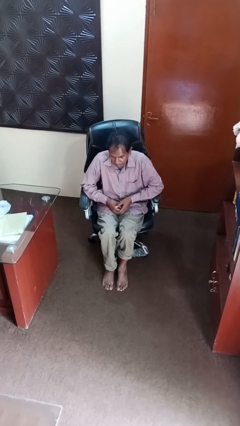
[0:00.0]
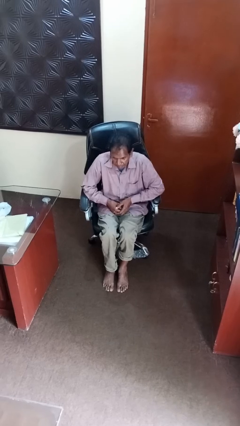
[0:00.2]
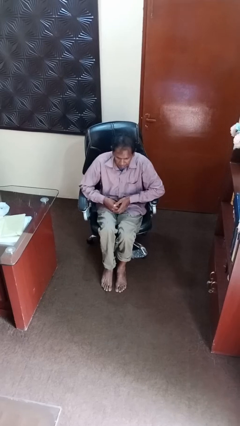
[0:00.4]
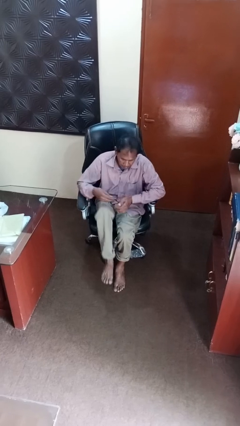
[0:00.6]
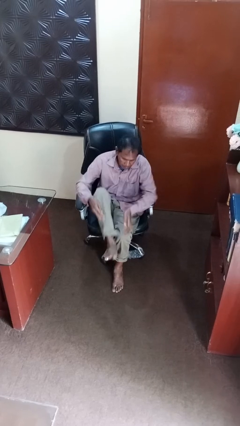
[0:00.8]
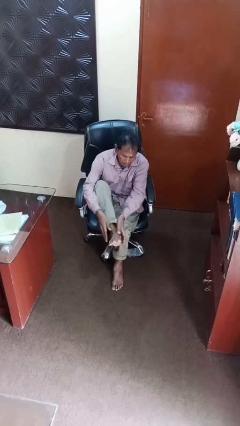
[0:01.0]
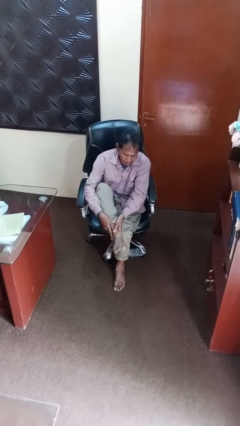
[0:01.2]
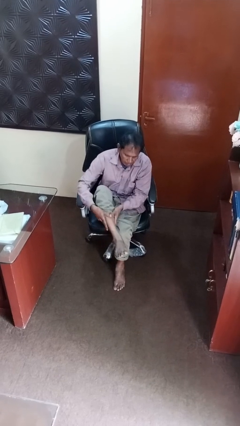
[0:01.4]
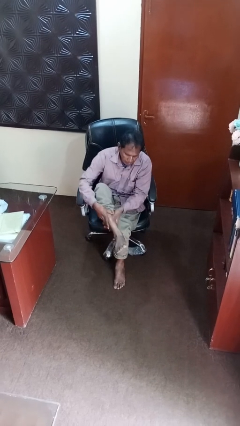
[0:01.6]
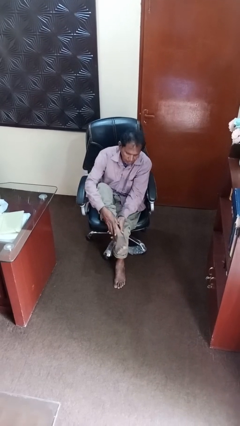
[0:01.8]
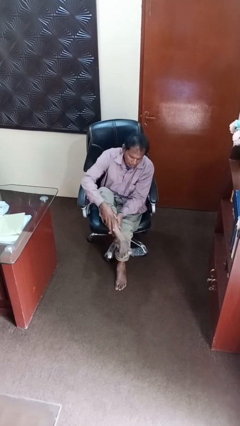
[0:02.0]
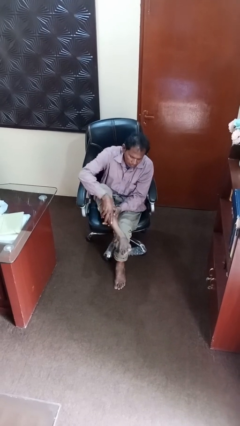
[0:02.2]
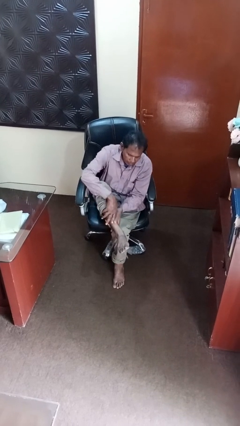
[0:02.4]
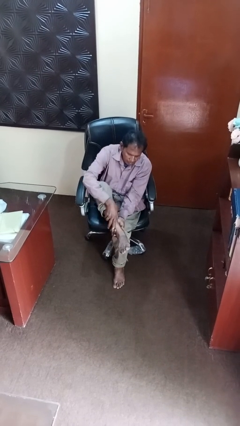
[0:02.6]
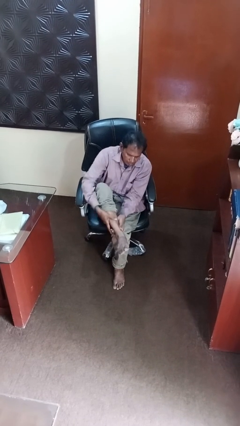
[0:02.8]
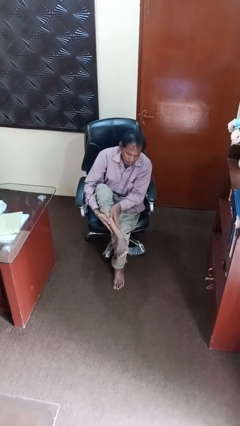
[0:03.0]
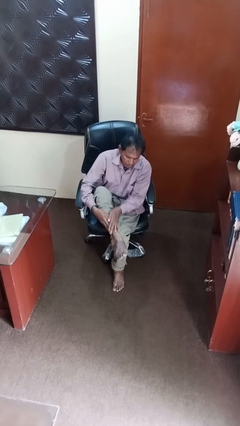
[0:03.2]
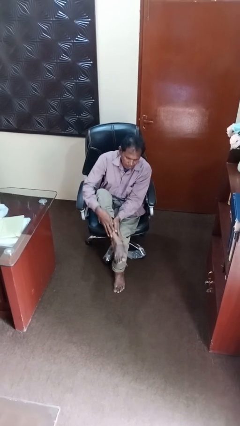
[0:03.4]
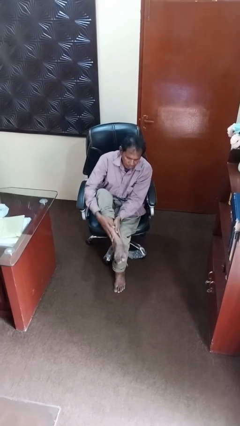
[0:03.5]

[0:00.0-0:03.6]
person rubs foot

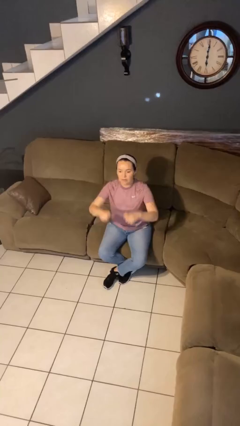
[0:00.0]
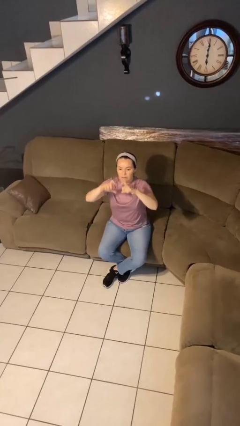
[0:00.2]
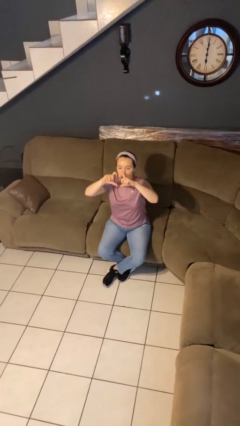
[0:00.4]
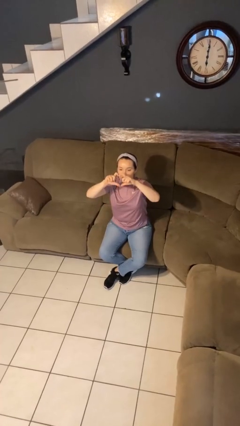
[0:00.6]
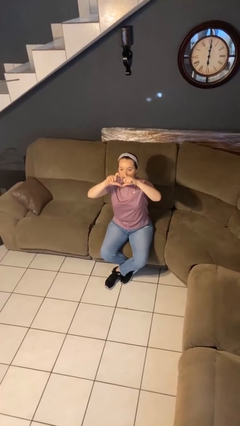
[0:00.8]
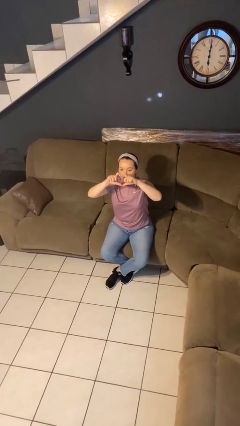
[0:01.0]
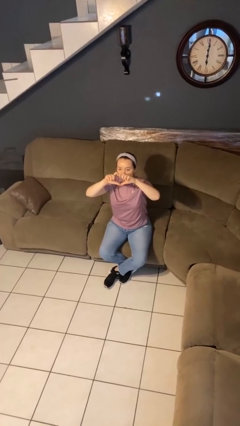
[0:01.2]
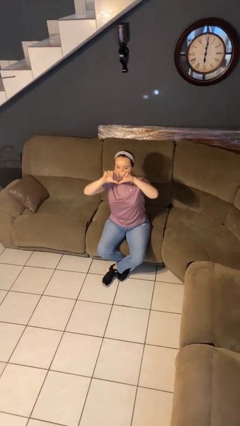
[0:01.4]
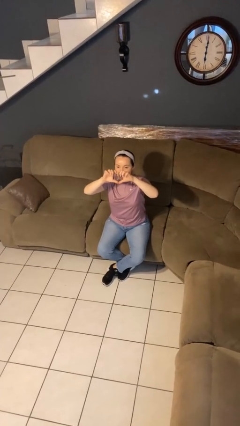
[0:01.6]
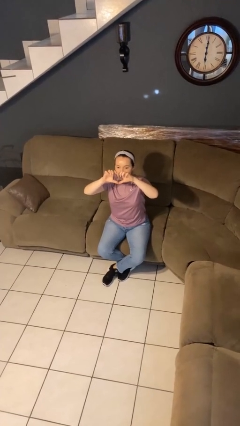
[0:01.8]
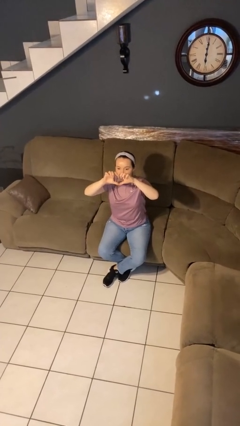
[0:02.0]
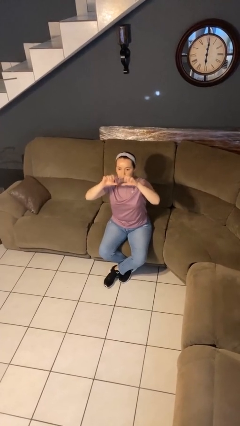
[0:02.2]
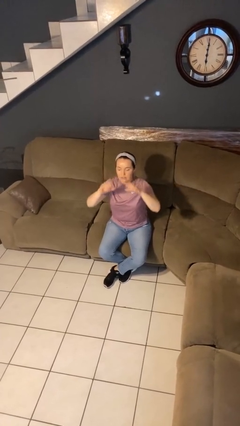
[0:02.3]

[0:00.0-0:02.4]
person gestures heart

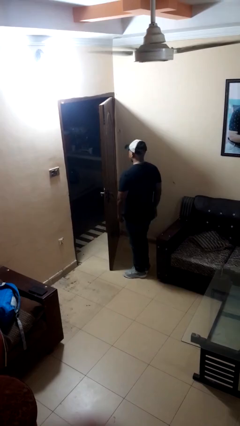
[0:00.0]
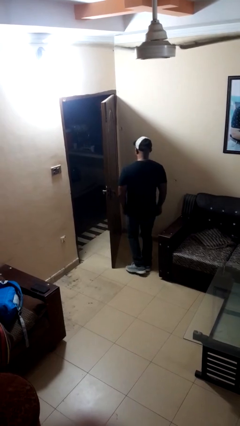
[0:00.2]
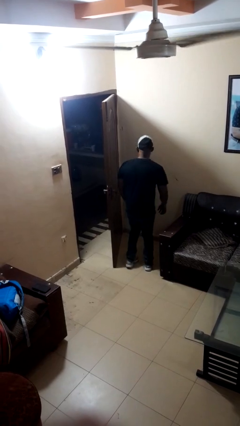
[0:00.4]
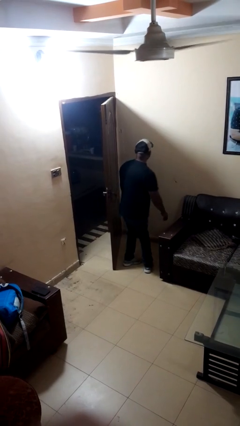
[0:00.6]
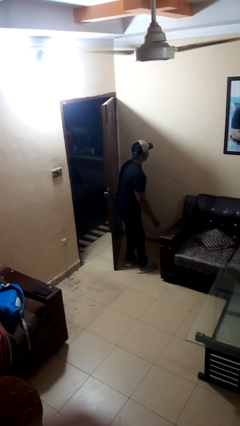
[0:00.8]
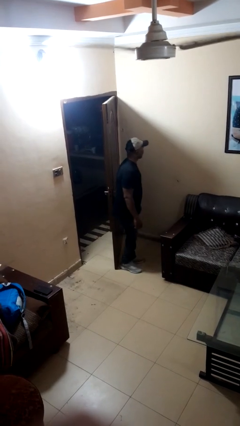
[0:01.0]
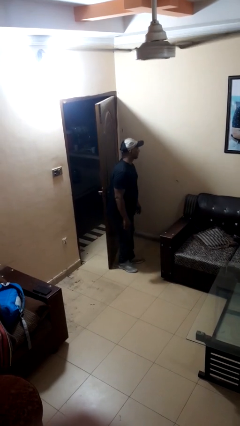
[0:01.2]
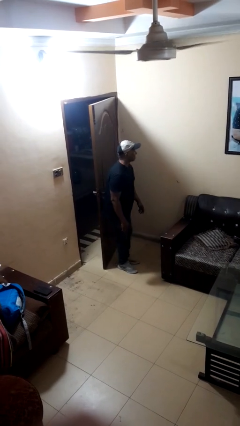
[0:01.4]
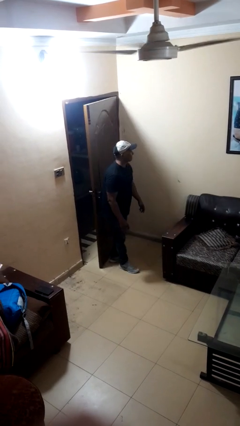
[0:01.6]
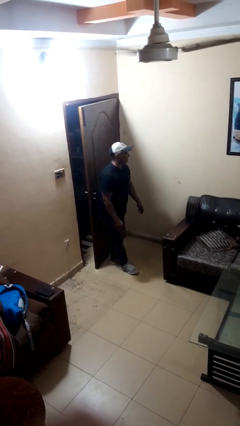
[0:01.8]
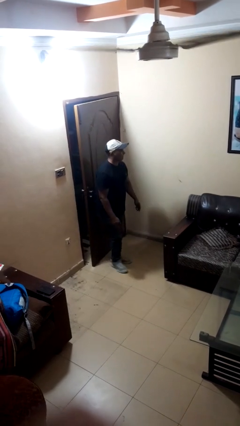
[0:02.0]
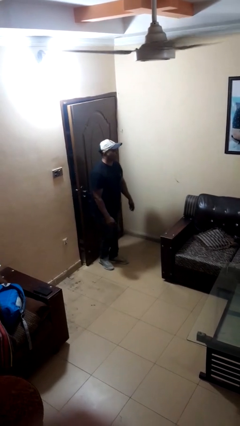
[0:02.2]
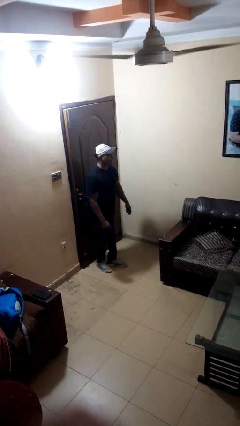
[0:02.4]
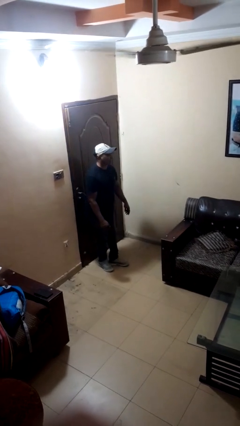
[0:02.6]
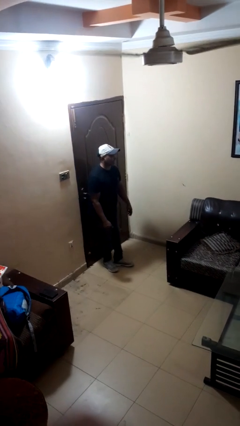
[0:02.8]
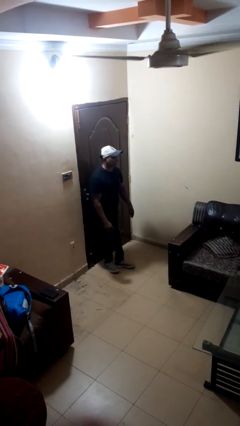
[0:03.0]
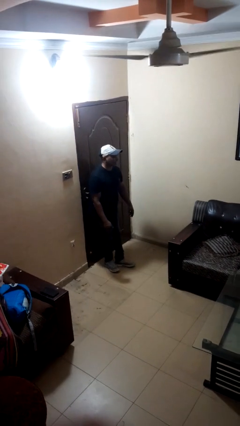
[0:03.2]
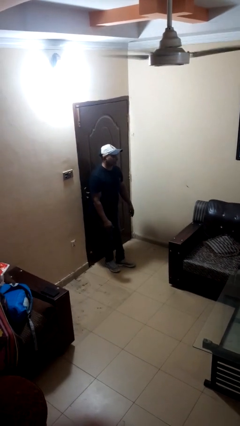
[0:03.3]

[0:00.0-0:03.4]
person closes door with hip

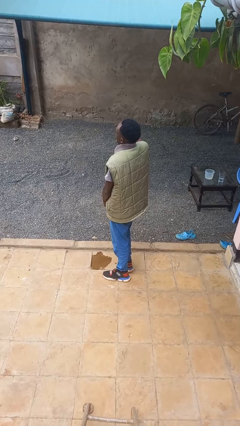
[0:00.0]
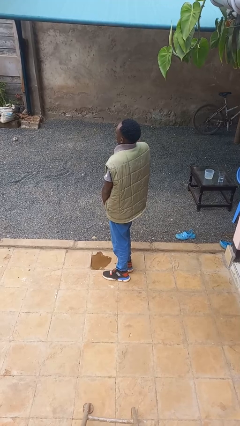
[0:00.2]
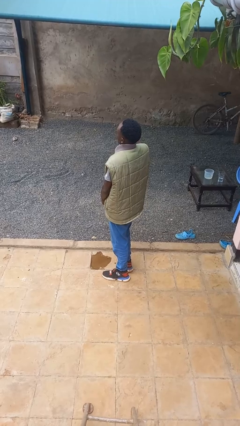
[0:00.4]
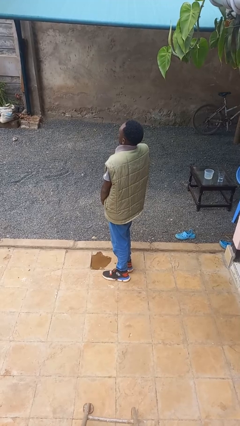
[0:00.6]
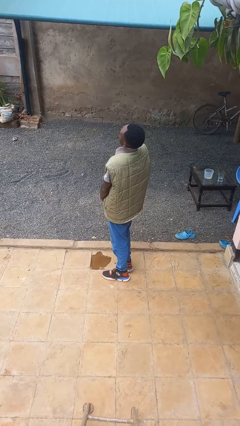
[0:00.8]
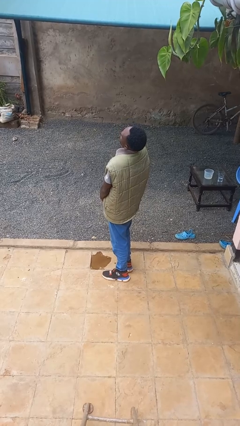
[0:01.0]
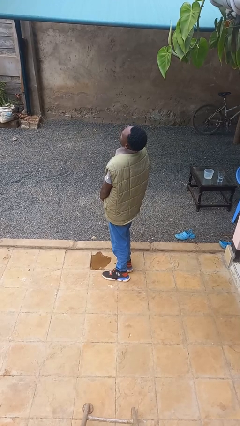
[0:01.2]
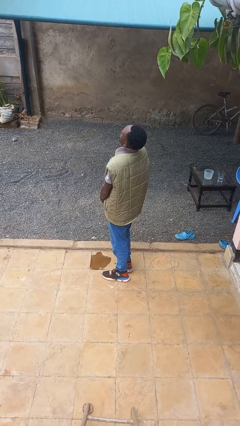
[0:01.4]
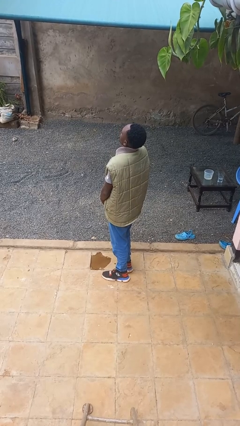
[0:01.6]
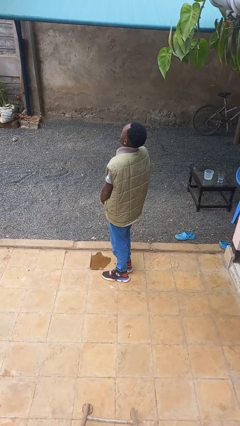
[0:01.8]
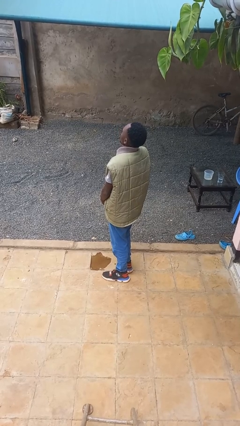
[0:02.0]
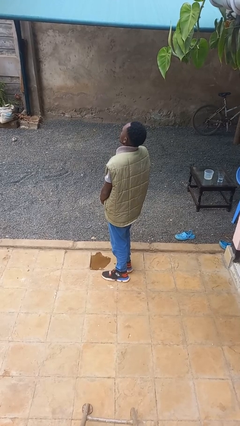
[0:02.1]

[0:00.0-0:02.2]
person unzips jacket

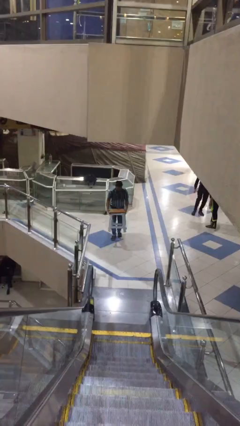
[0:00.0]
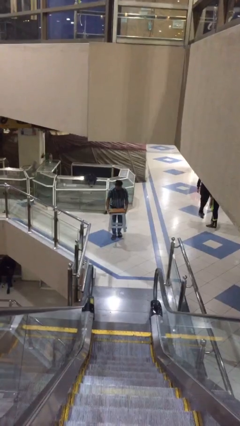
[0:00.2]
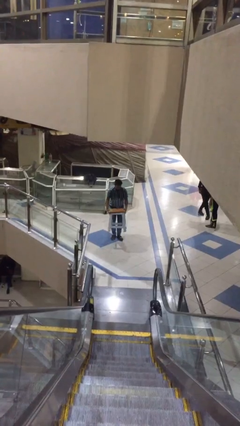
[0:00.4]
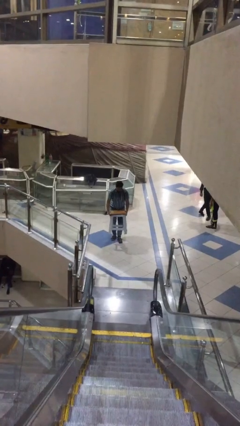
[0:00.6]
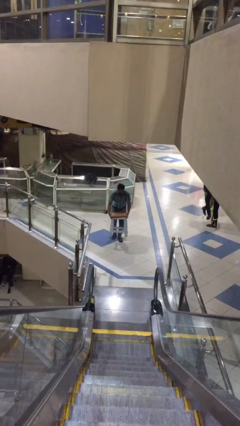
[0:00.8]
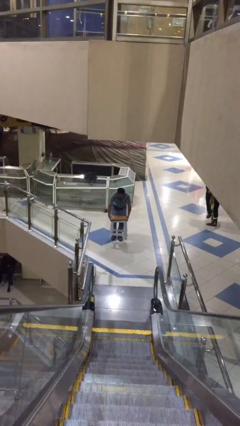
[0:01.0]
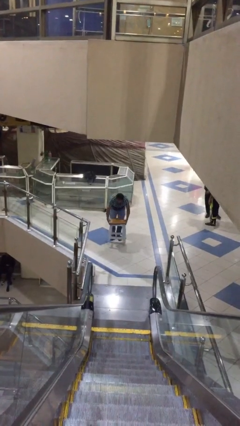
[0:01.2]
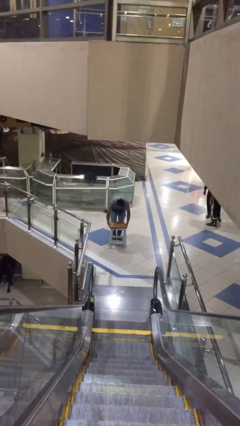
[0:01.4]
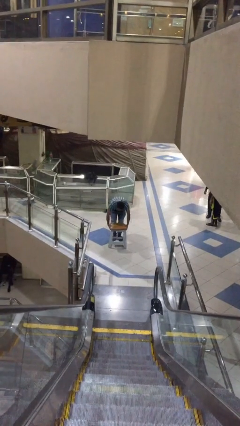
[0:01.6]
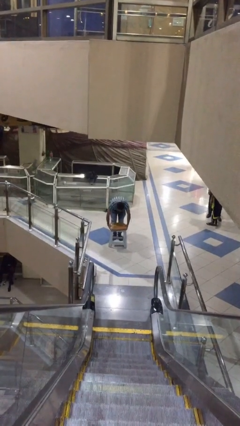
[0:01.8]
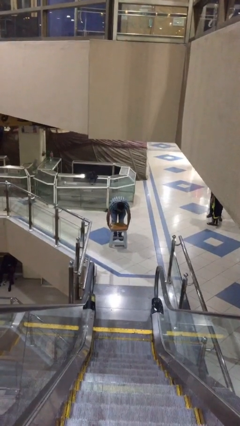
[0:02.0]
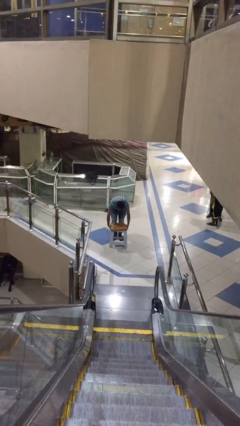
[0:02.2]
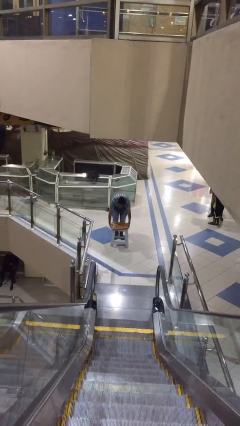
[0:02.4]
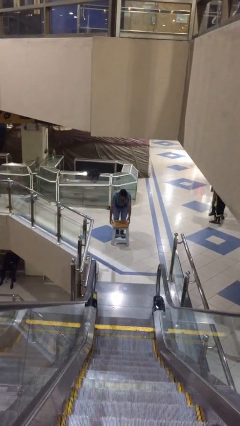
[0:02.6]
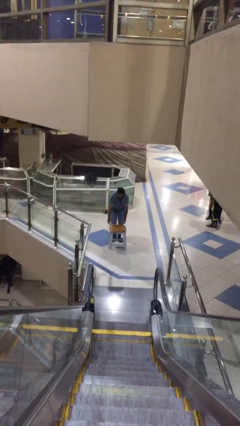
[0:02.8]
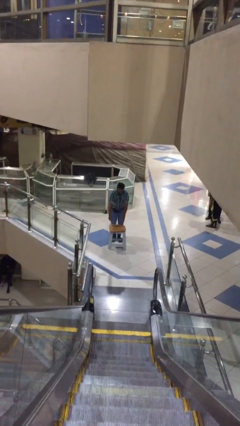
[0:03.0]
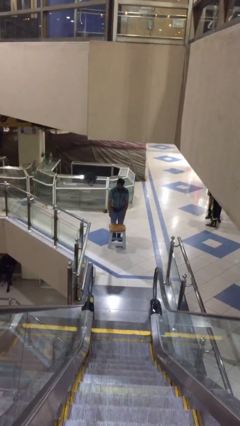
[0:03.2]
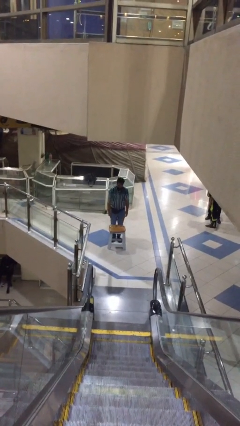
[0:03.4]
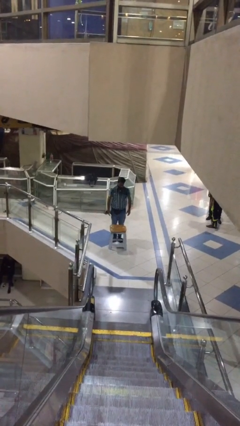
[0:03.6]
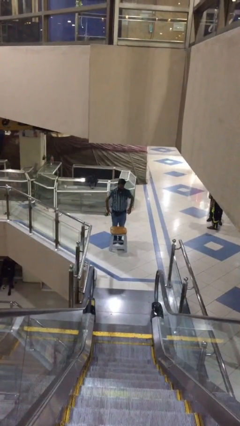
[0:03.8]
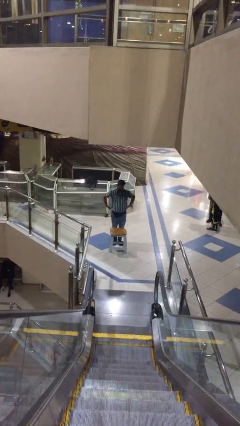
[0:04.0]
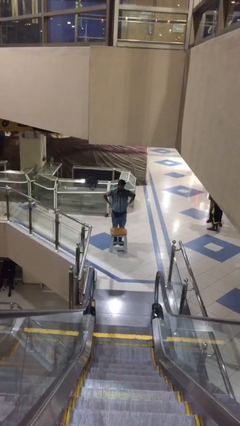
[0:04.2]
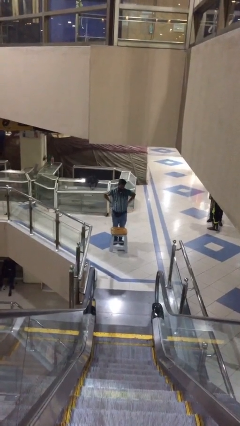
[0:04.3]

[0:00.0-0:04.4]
person puts down object on floor

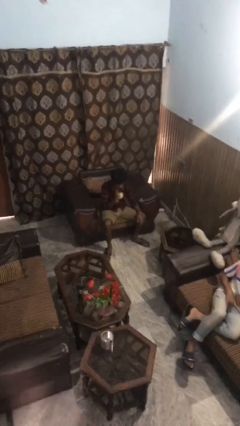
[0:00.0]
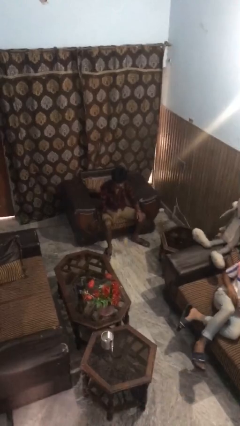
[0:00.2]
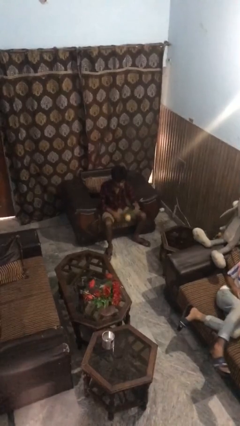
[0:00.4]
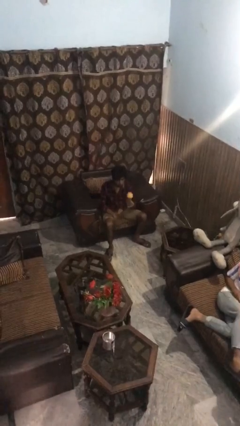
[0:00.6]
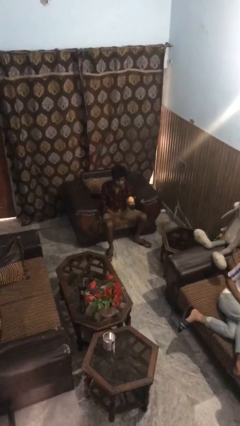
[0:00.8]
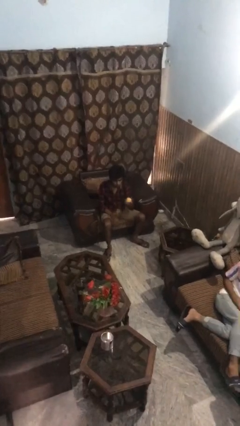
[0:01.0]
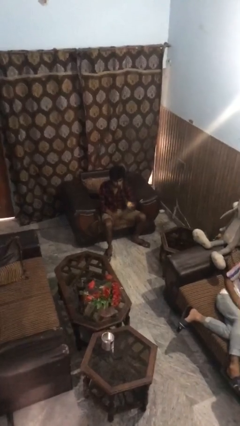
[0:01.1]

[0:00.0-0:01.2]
person bounces ball on floor

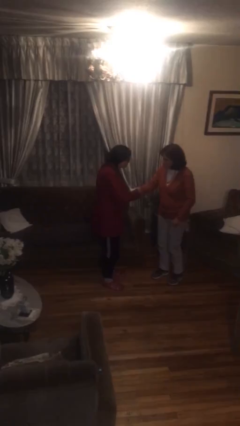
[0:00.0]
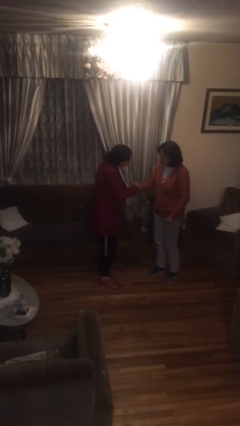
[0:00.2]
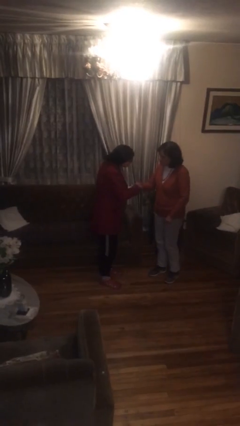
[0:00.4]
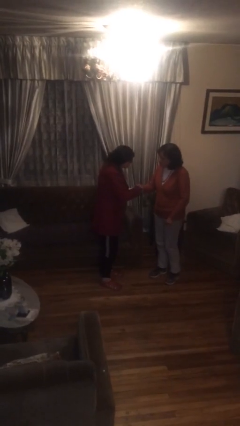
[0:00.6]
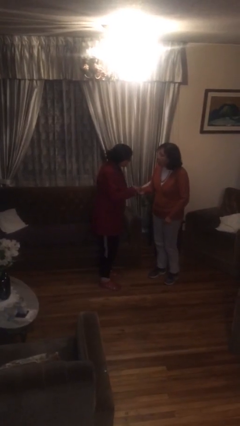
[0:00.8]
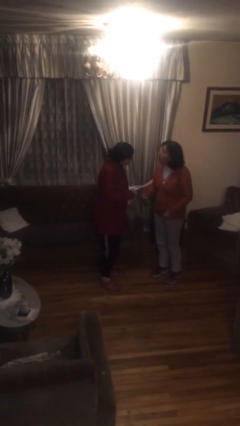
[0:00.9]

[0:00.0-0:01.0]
person shakes hand
